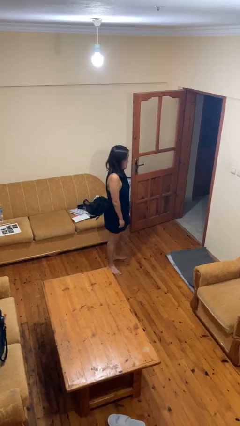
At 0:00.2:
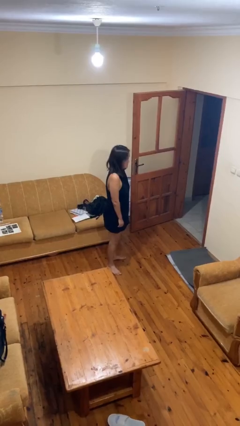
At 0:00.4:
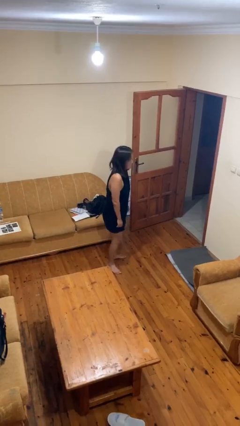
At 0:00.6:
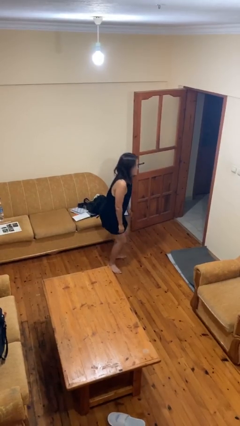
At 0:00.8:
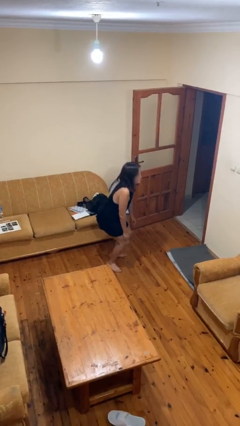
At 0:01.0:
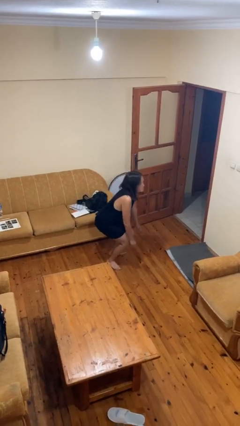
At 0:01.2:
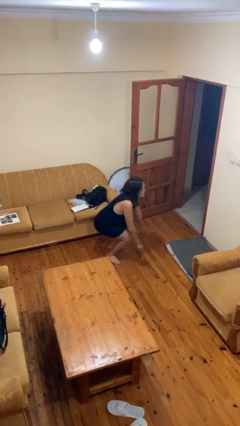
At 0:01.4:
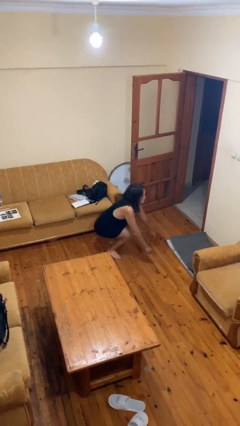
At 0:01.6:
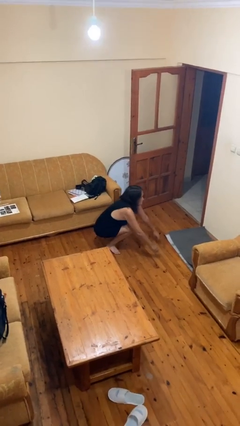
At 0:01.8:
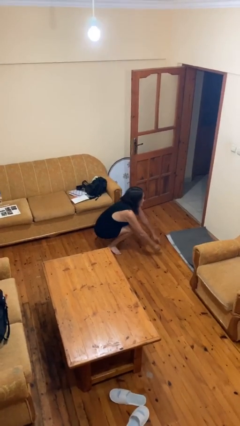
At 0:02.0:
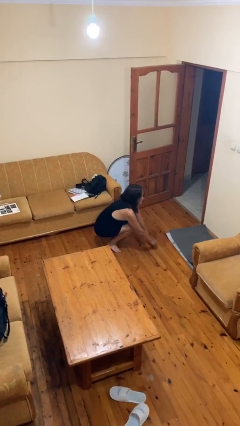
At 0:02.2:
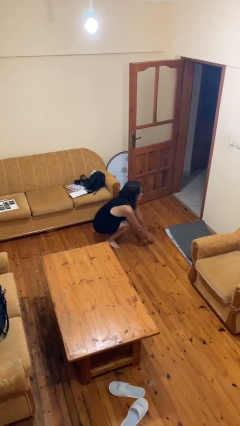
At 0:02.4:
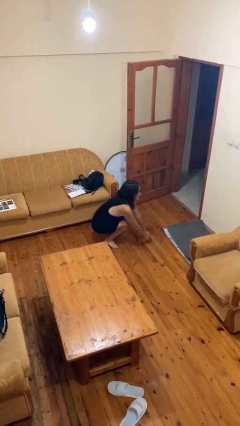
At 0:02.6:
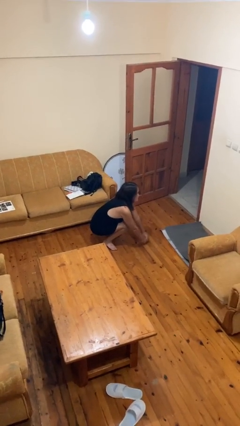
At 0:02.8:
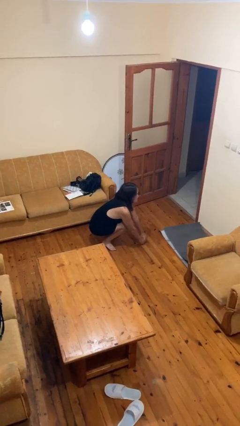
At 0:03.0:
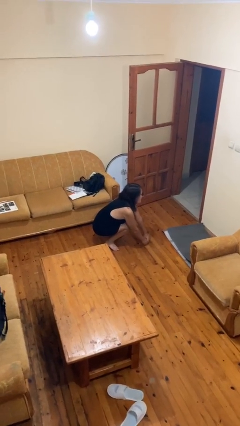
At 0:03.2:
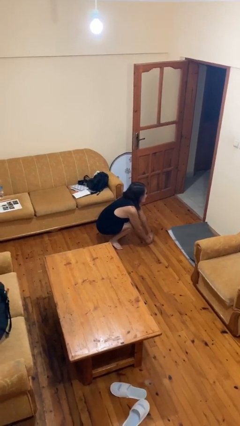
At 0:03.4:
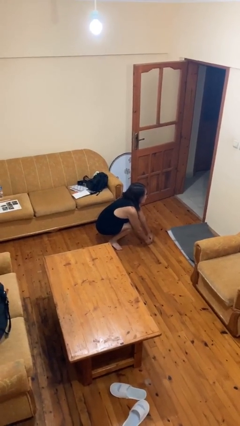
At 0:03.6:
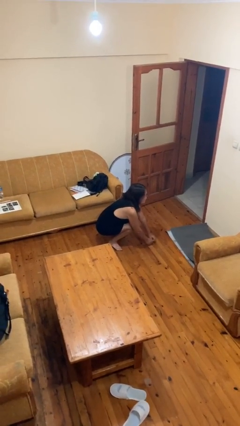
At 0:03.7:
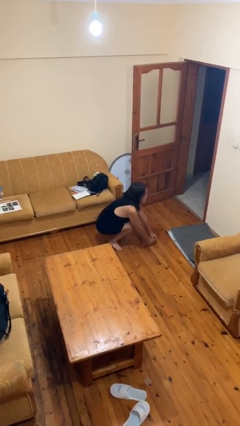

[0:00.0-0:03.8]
person squats

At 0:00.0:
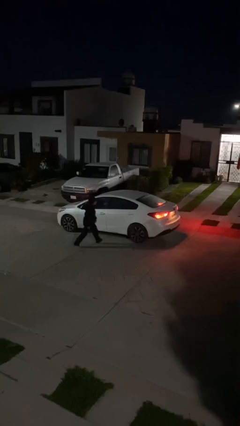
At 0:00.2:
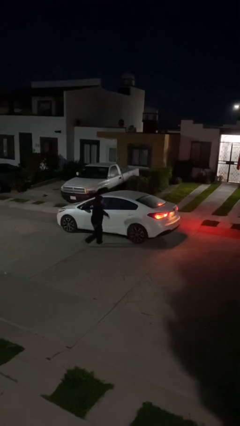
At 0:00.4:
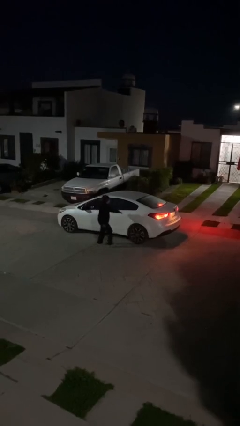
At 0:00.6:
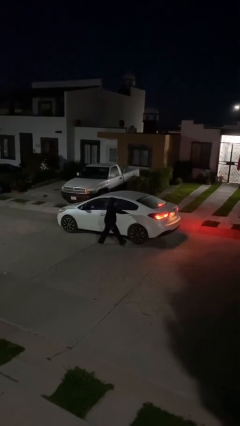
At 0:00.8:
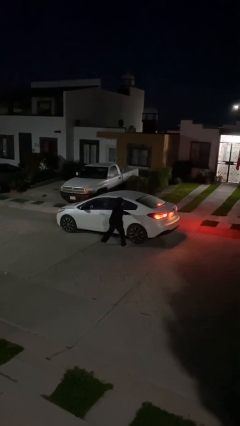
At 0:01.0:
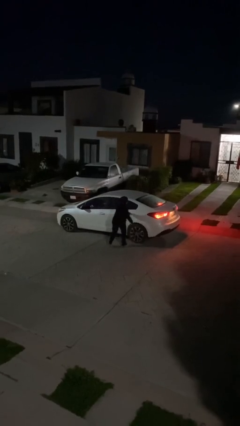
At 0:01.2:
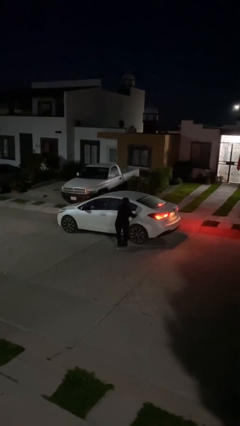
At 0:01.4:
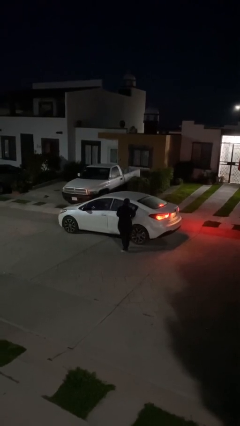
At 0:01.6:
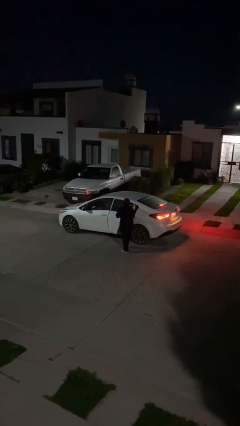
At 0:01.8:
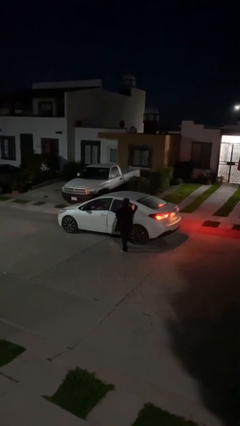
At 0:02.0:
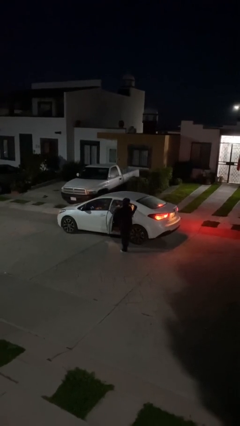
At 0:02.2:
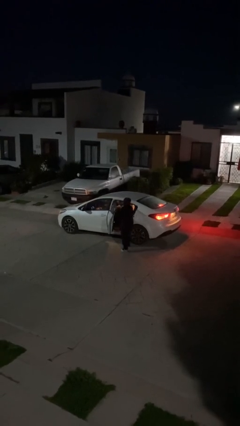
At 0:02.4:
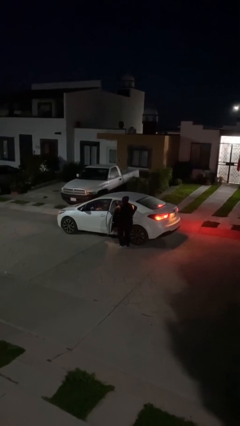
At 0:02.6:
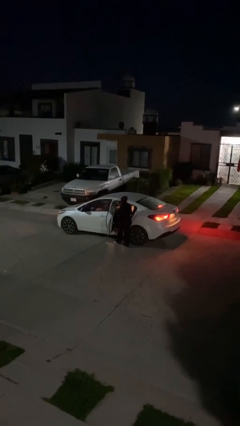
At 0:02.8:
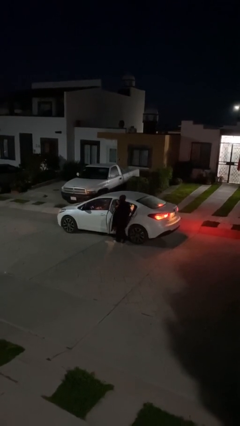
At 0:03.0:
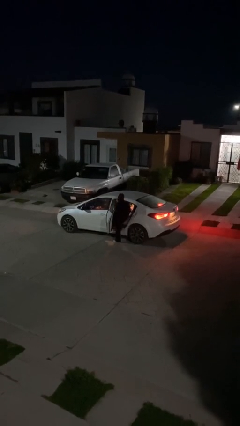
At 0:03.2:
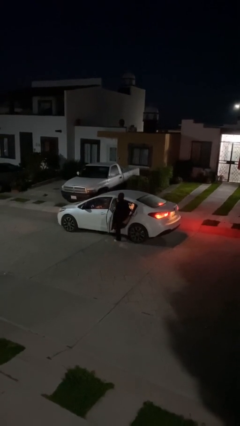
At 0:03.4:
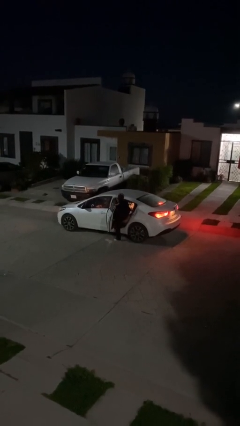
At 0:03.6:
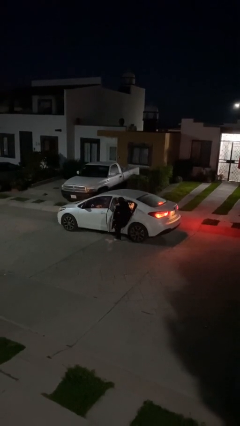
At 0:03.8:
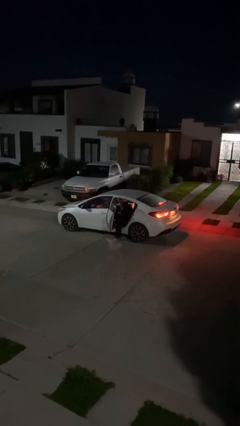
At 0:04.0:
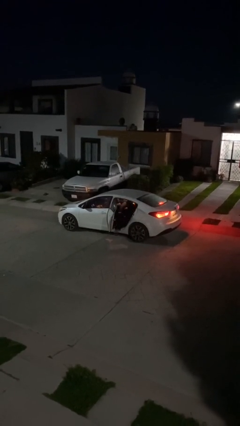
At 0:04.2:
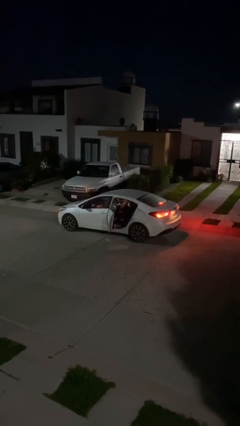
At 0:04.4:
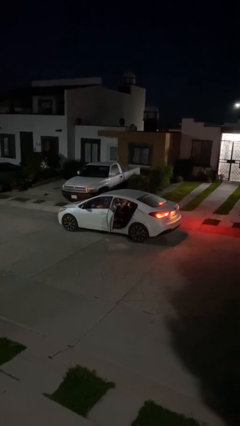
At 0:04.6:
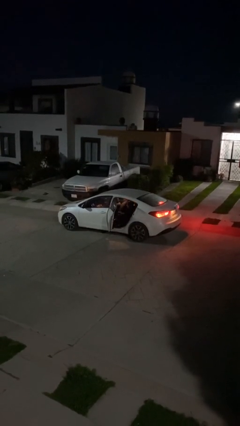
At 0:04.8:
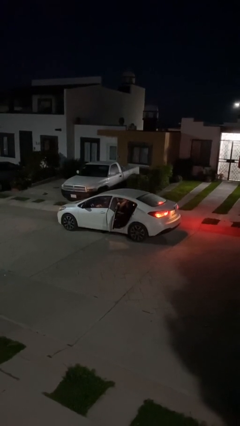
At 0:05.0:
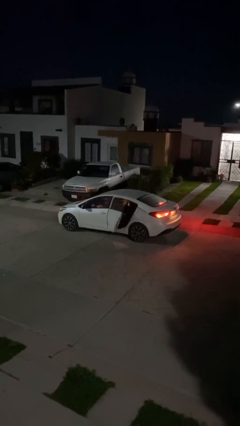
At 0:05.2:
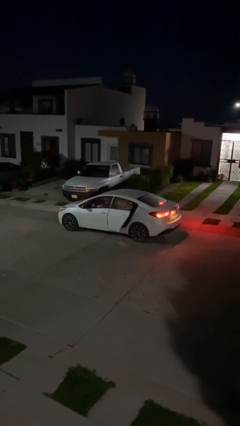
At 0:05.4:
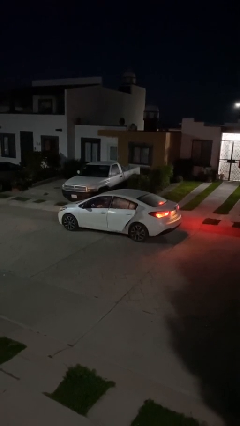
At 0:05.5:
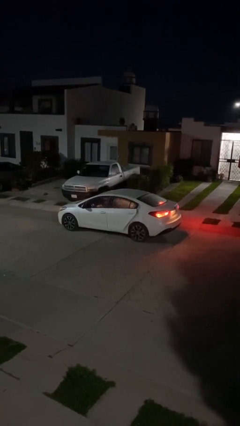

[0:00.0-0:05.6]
car picks up person

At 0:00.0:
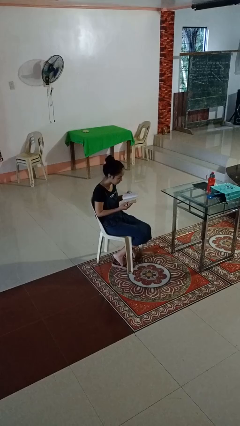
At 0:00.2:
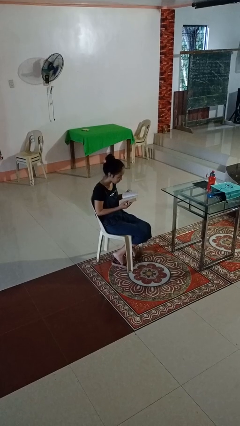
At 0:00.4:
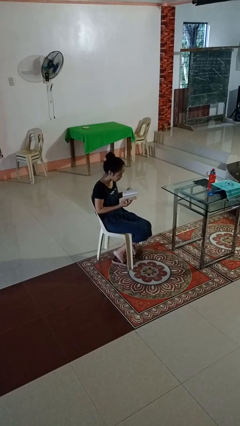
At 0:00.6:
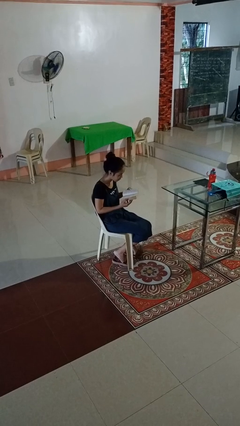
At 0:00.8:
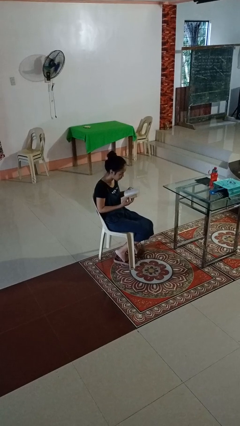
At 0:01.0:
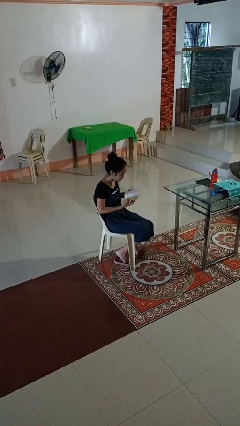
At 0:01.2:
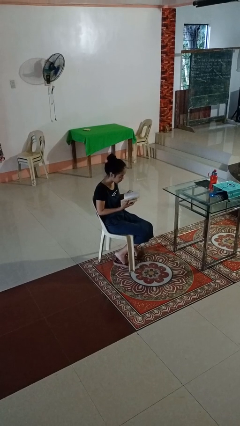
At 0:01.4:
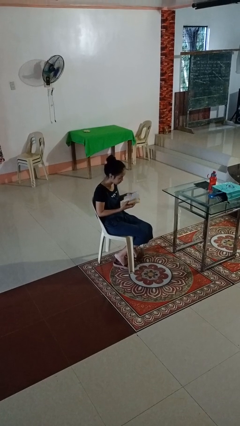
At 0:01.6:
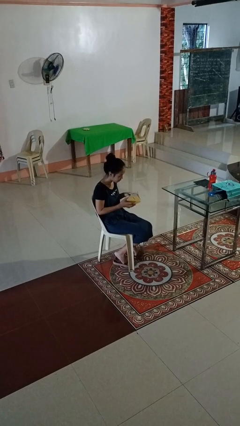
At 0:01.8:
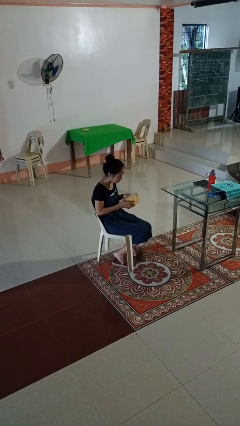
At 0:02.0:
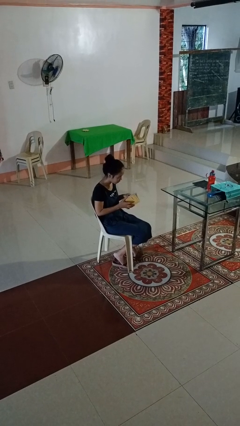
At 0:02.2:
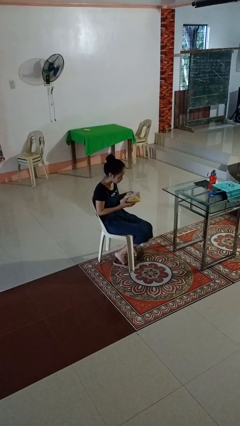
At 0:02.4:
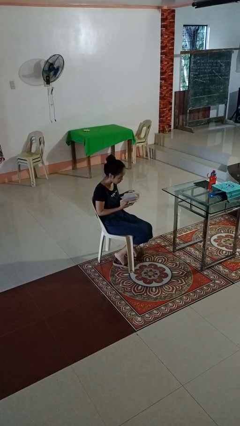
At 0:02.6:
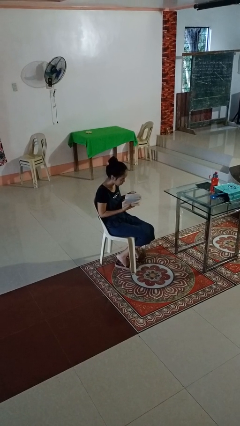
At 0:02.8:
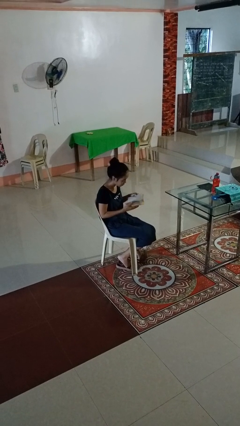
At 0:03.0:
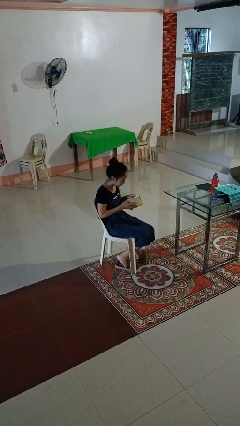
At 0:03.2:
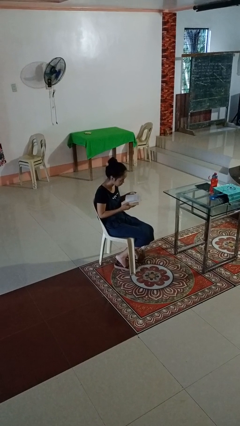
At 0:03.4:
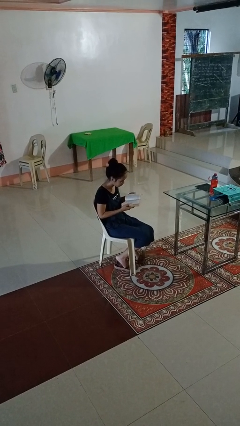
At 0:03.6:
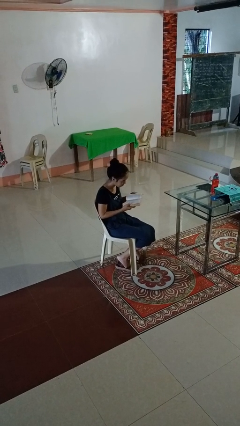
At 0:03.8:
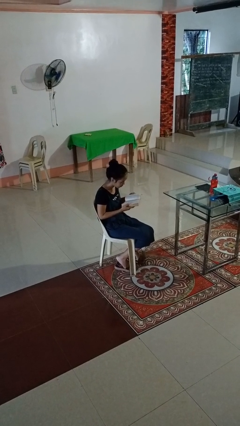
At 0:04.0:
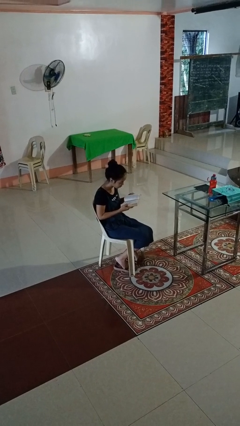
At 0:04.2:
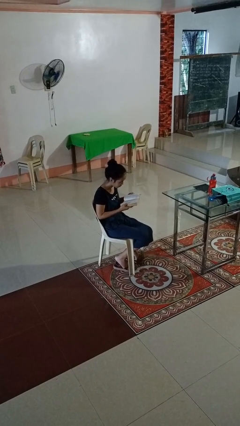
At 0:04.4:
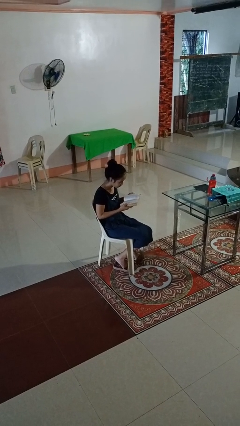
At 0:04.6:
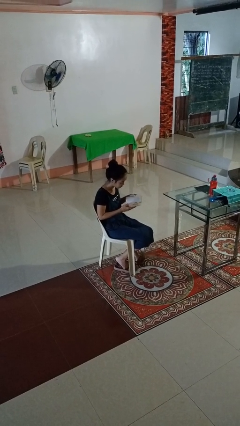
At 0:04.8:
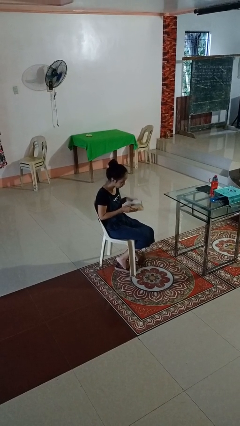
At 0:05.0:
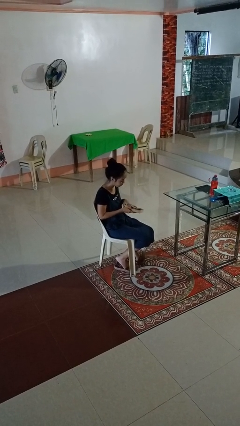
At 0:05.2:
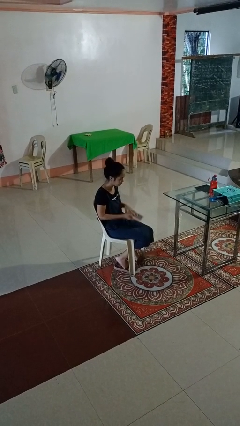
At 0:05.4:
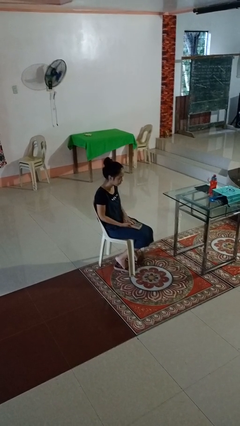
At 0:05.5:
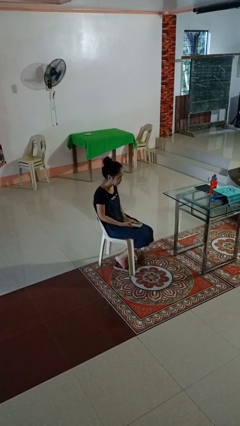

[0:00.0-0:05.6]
person reads book

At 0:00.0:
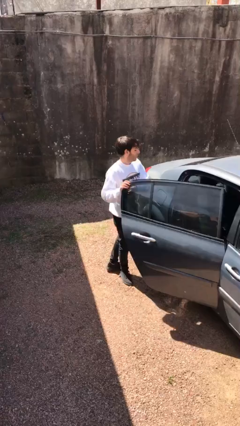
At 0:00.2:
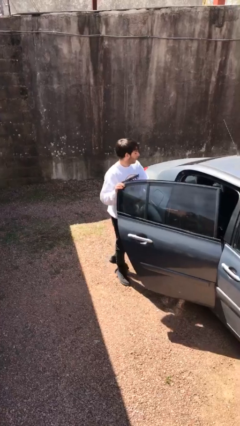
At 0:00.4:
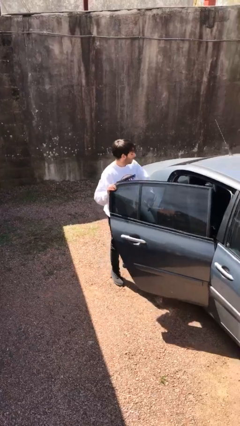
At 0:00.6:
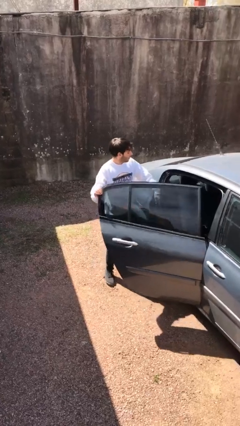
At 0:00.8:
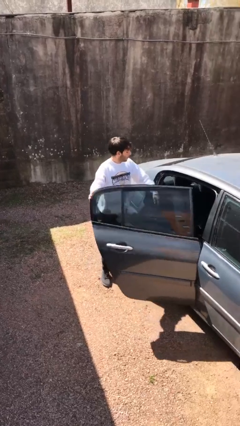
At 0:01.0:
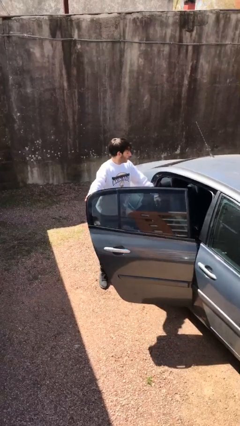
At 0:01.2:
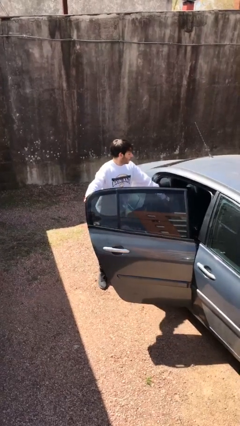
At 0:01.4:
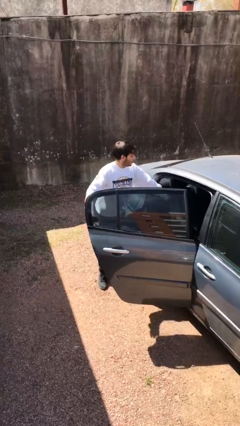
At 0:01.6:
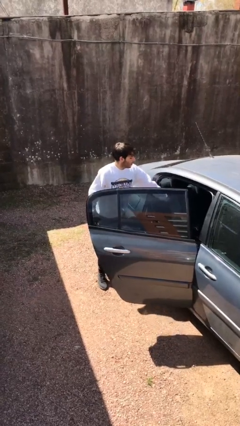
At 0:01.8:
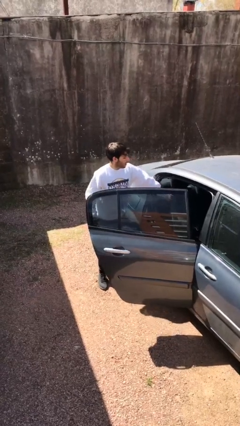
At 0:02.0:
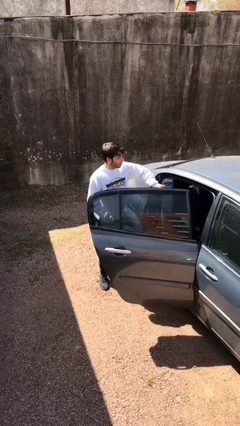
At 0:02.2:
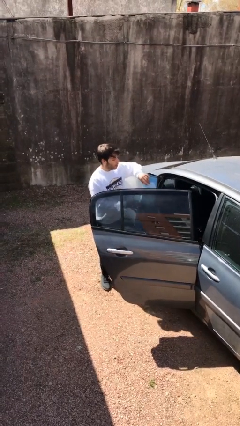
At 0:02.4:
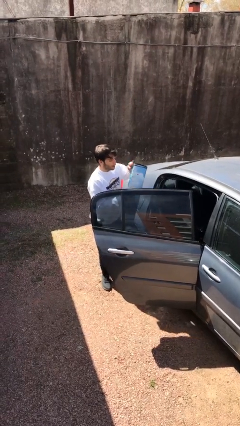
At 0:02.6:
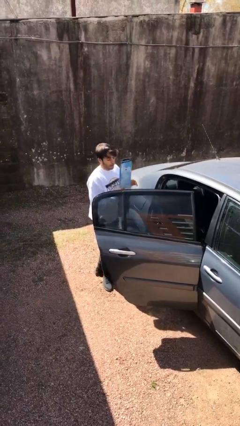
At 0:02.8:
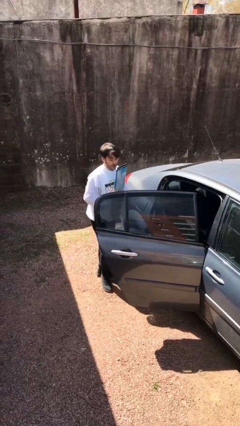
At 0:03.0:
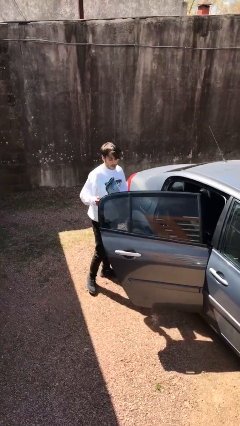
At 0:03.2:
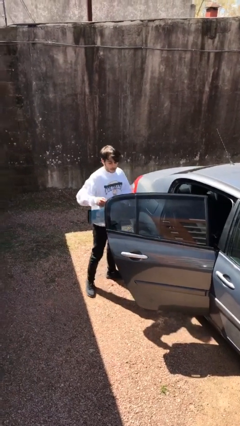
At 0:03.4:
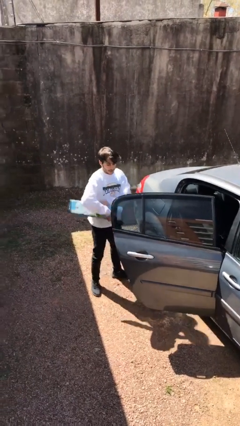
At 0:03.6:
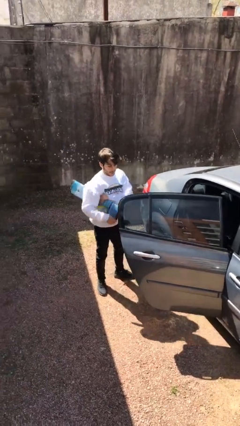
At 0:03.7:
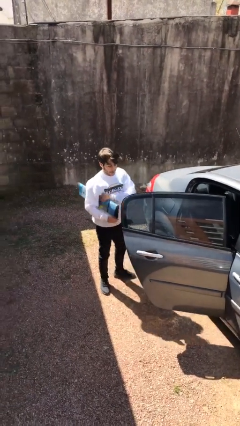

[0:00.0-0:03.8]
person unloads car
